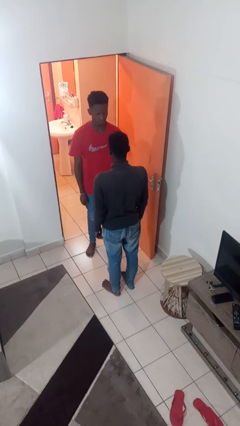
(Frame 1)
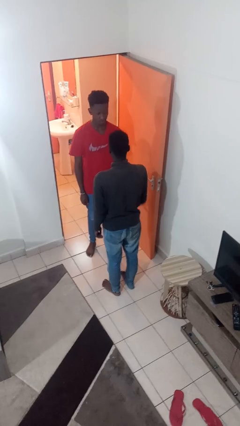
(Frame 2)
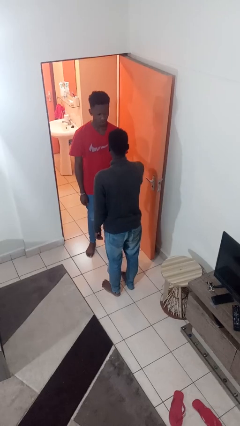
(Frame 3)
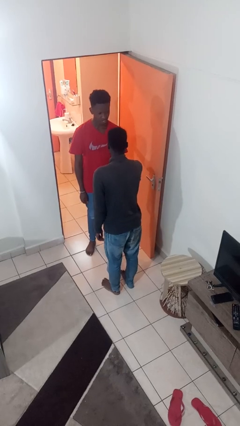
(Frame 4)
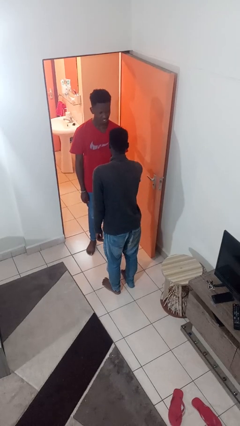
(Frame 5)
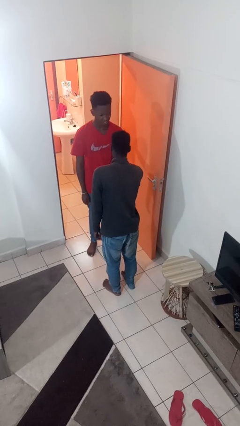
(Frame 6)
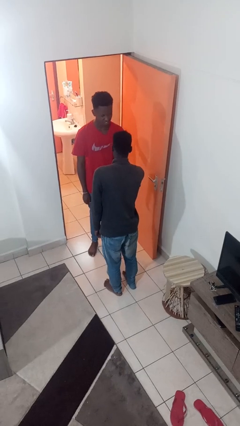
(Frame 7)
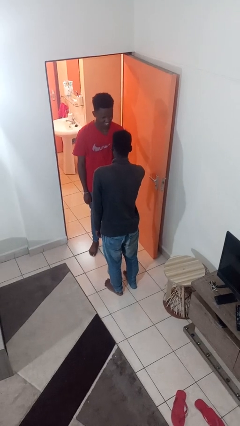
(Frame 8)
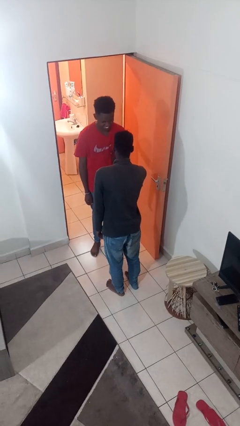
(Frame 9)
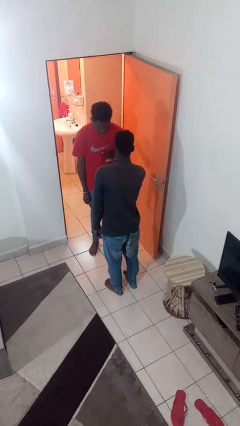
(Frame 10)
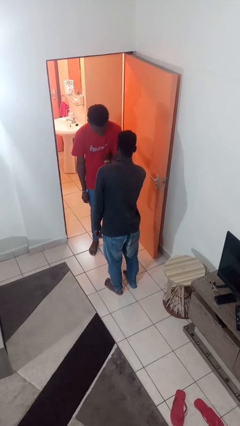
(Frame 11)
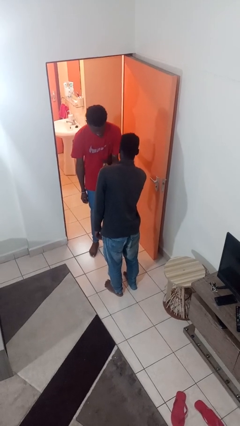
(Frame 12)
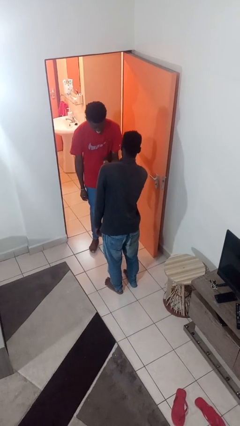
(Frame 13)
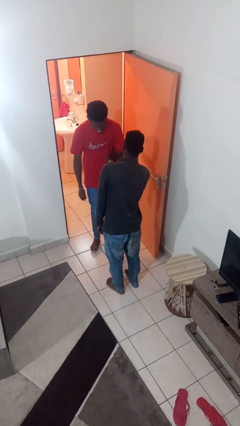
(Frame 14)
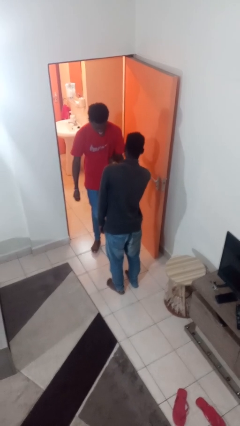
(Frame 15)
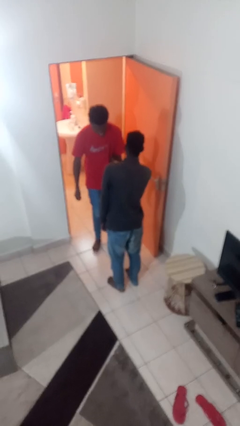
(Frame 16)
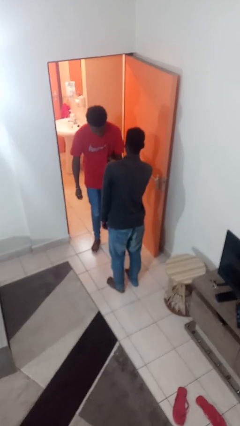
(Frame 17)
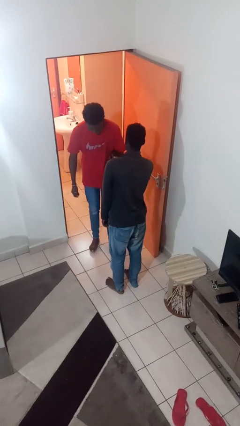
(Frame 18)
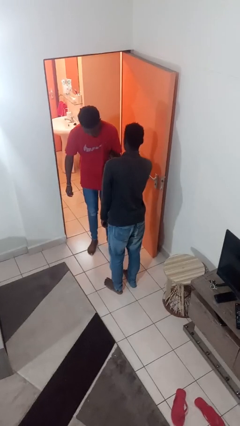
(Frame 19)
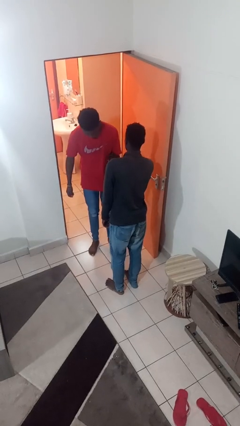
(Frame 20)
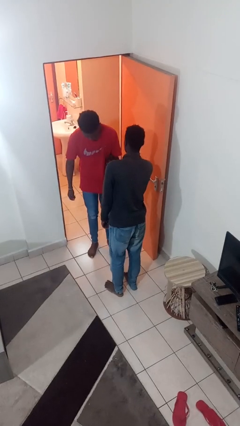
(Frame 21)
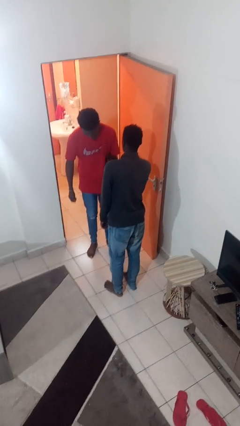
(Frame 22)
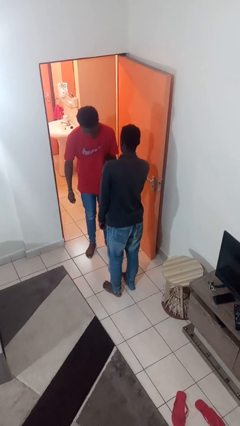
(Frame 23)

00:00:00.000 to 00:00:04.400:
person tickles person

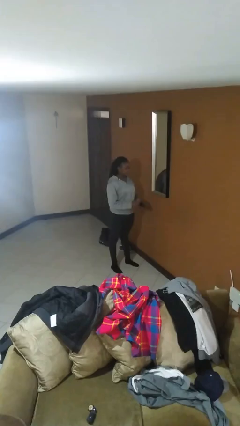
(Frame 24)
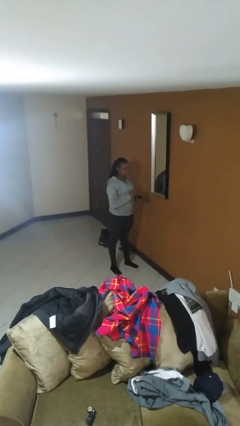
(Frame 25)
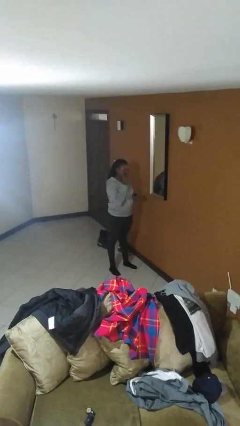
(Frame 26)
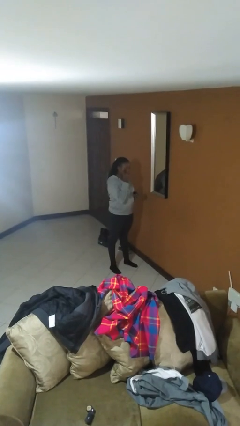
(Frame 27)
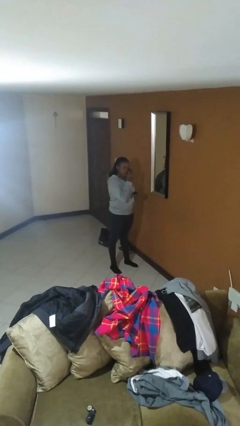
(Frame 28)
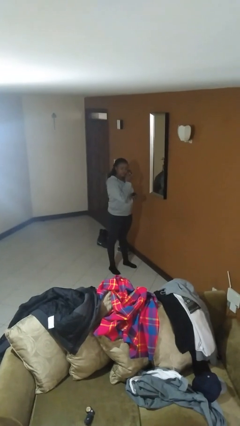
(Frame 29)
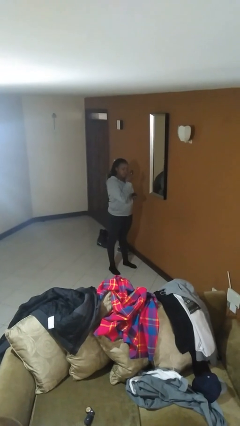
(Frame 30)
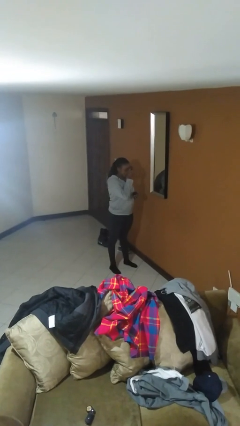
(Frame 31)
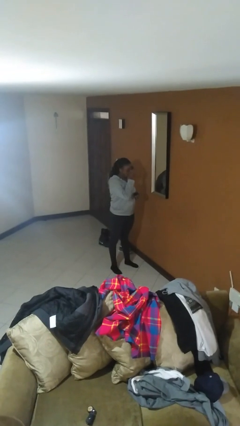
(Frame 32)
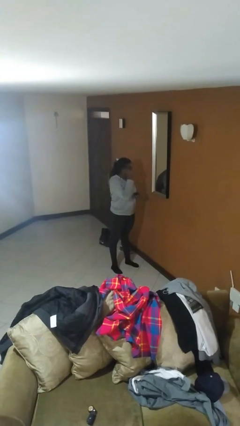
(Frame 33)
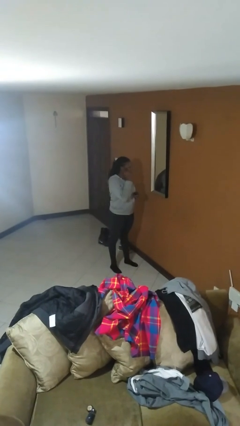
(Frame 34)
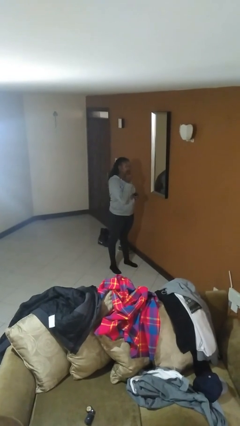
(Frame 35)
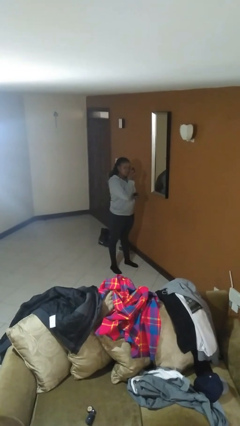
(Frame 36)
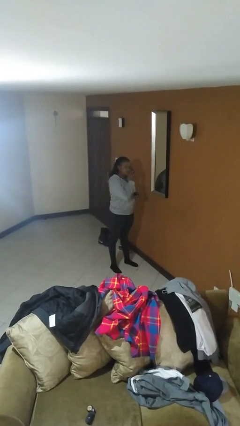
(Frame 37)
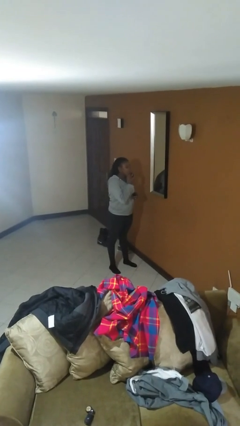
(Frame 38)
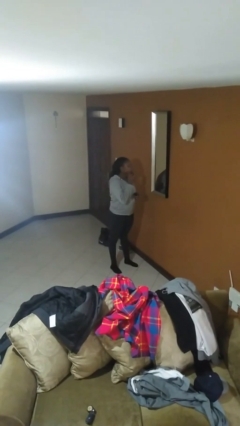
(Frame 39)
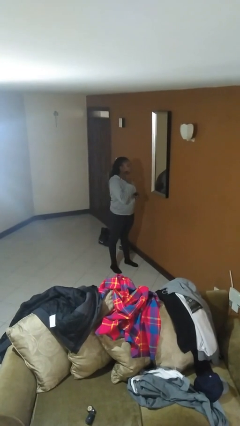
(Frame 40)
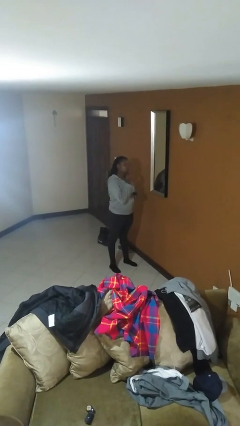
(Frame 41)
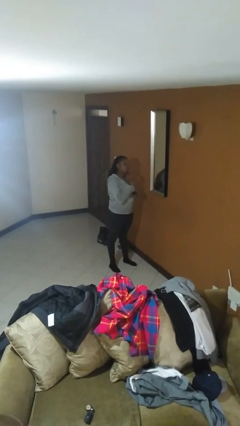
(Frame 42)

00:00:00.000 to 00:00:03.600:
person applies foundation makeup

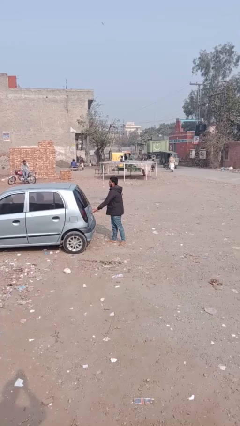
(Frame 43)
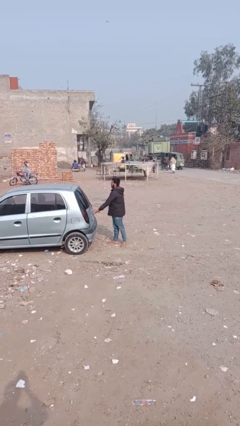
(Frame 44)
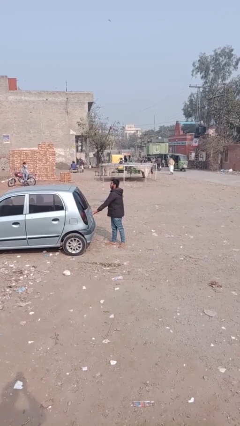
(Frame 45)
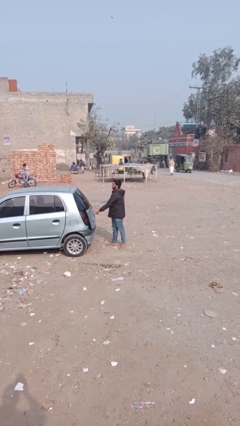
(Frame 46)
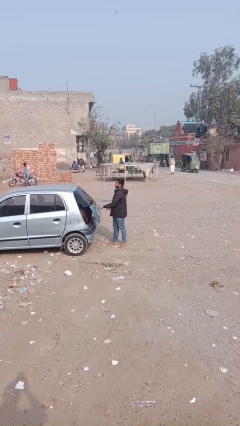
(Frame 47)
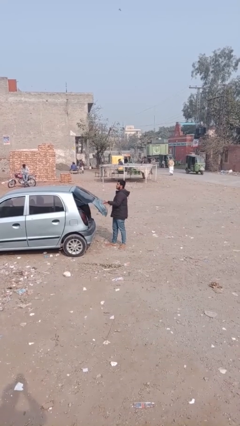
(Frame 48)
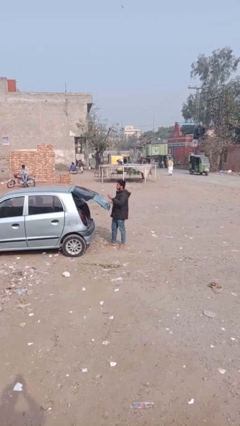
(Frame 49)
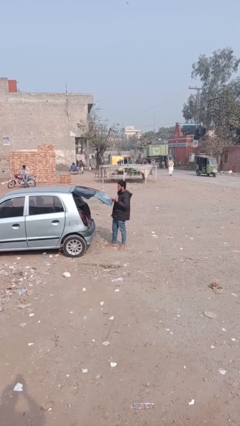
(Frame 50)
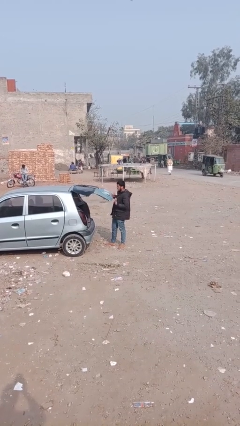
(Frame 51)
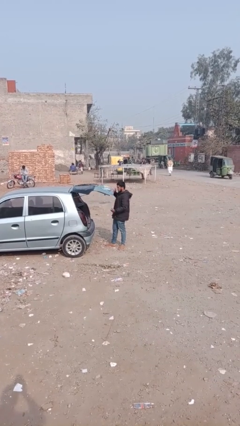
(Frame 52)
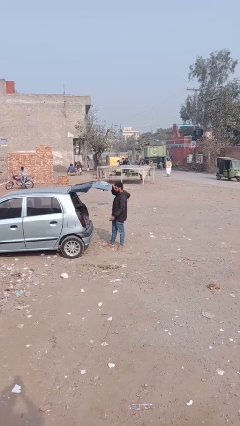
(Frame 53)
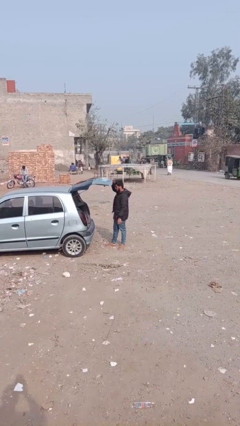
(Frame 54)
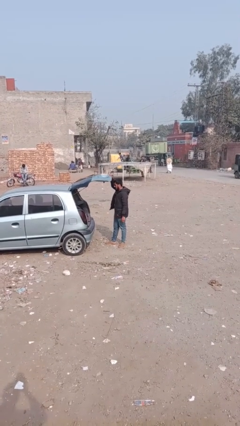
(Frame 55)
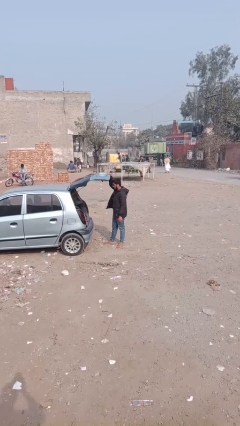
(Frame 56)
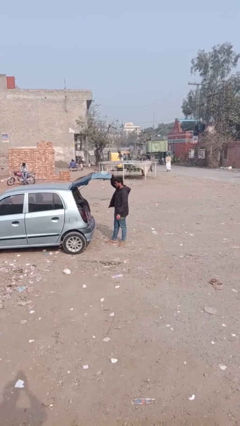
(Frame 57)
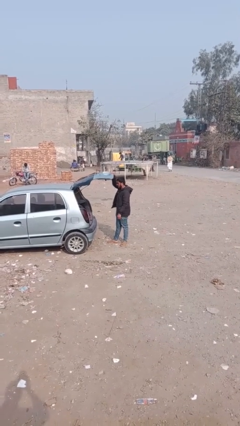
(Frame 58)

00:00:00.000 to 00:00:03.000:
person opens car trunk

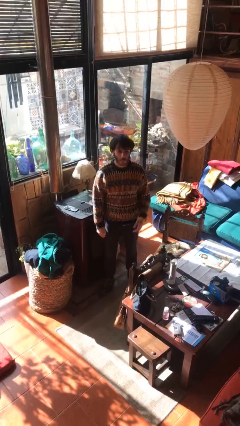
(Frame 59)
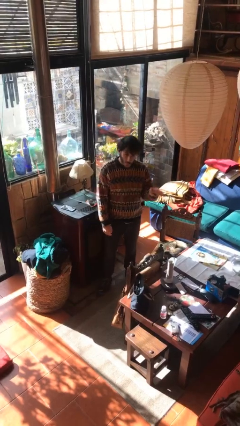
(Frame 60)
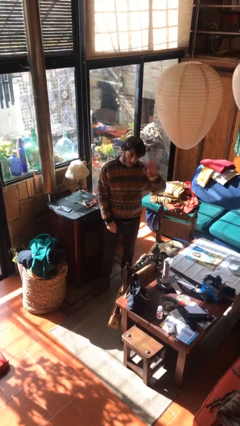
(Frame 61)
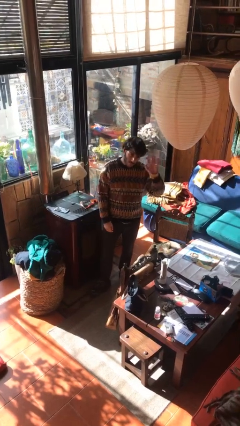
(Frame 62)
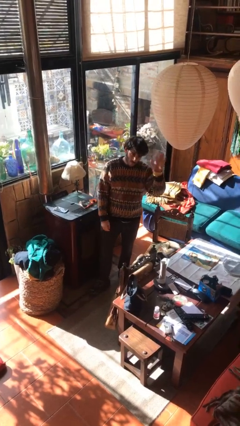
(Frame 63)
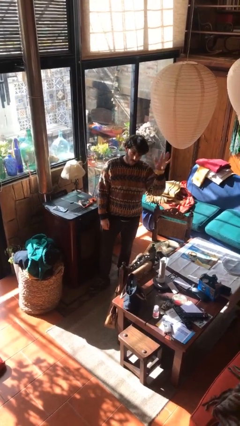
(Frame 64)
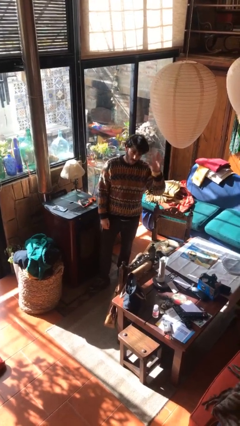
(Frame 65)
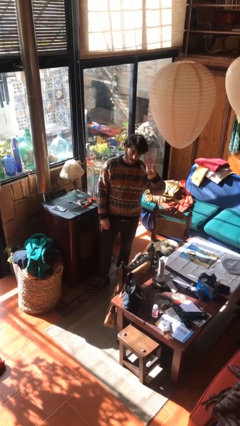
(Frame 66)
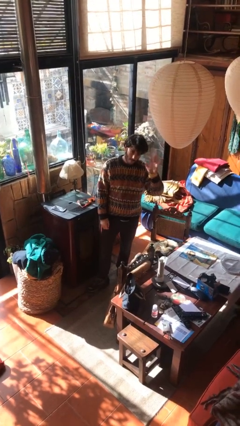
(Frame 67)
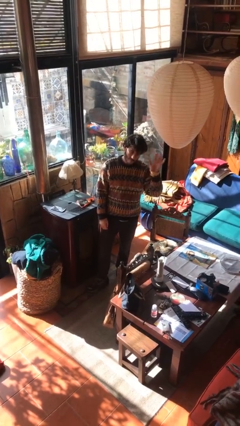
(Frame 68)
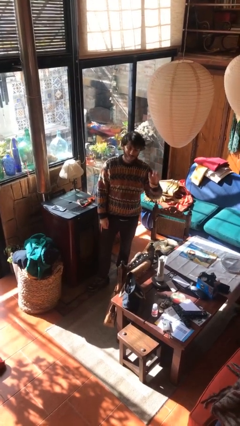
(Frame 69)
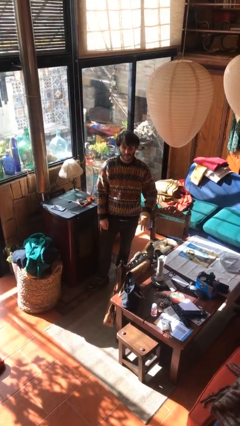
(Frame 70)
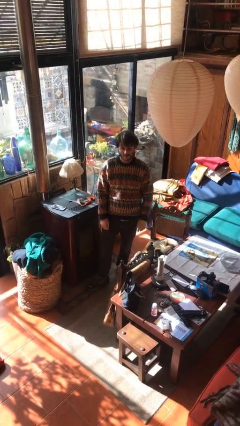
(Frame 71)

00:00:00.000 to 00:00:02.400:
person waves at person

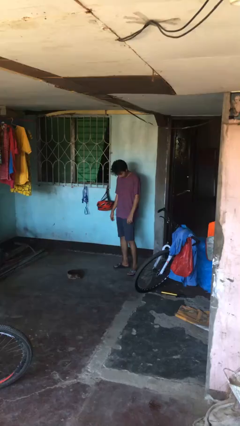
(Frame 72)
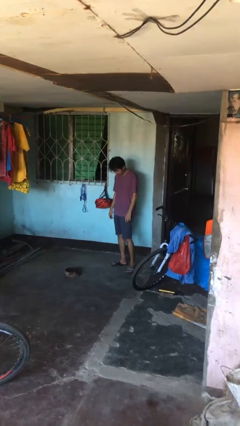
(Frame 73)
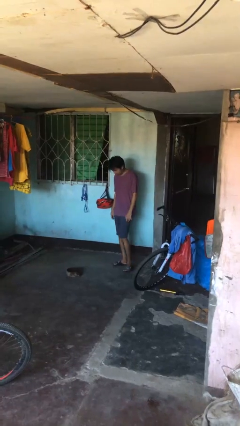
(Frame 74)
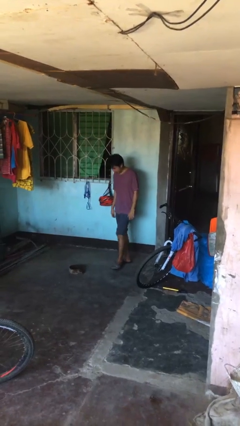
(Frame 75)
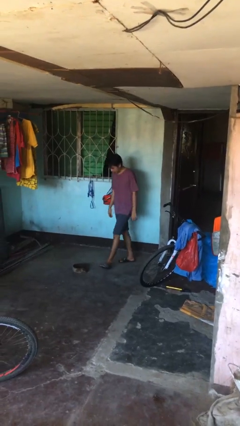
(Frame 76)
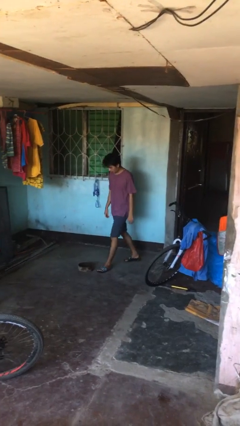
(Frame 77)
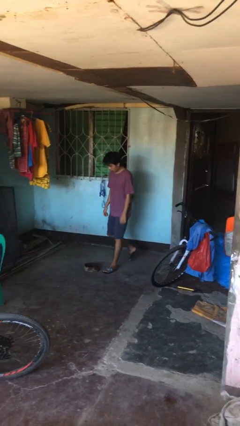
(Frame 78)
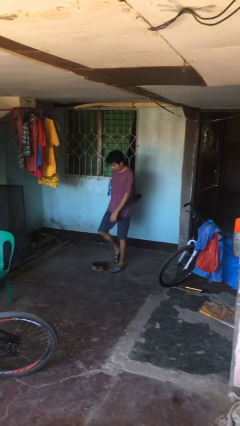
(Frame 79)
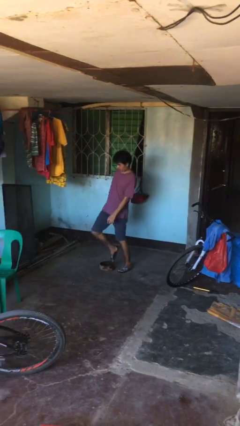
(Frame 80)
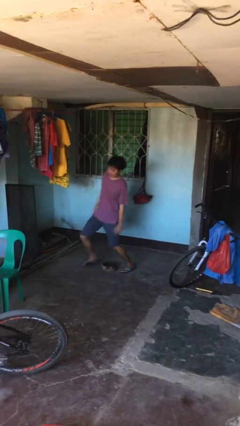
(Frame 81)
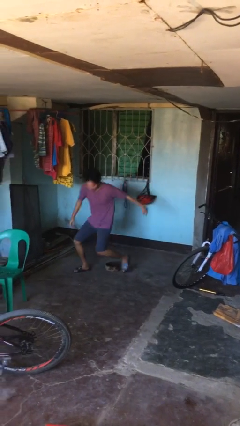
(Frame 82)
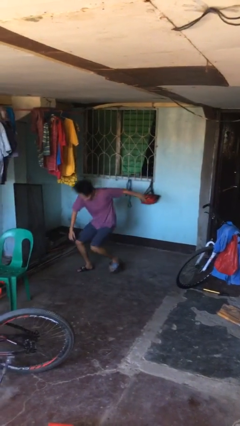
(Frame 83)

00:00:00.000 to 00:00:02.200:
person trips on object on floor

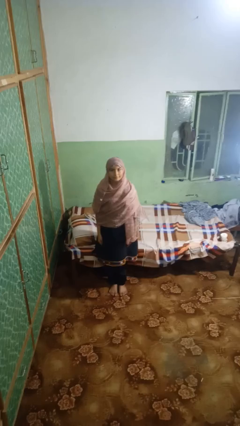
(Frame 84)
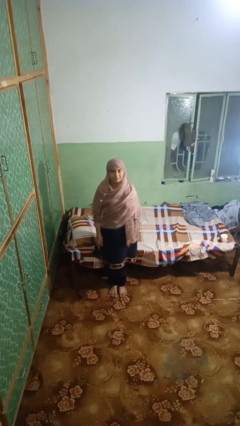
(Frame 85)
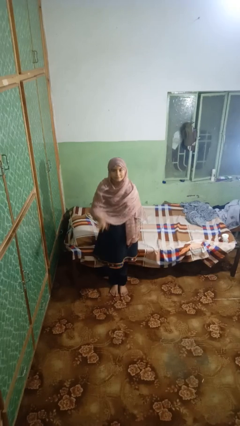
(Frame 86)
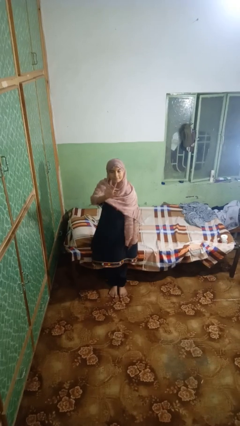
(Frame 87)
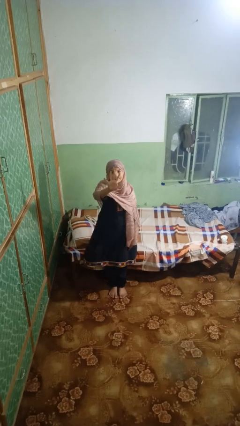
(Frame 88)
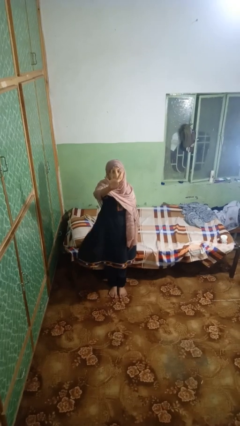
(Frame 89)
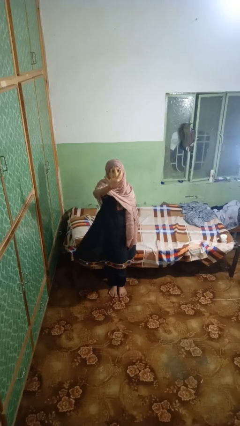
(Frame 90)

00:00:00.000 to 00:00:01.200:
person gestures number five

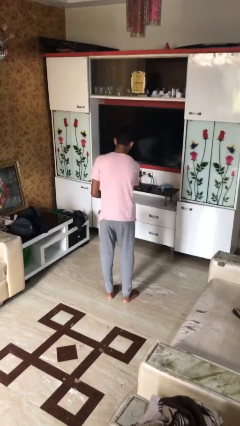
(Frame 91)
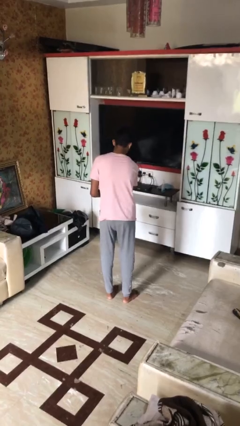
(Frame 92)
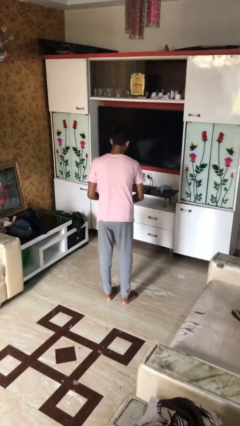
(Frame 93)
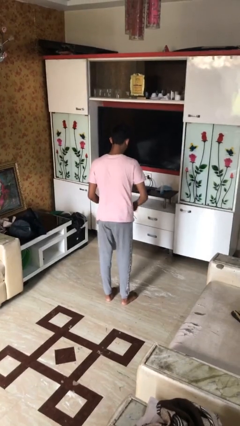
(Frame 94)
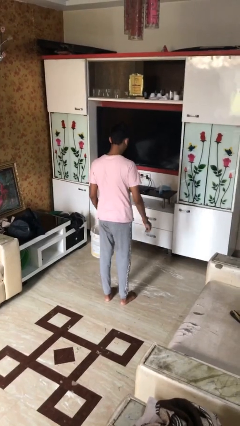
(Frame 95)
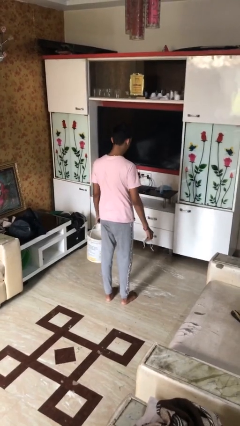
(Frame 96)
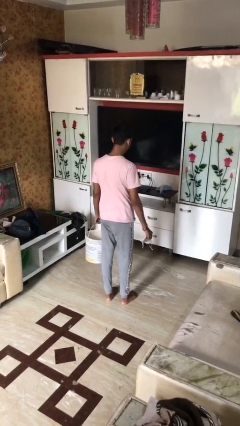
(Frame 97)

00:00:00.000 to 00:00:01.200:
person takes object from basket
